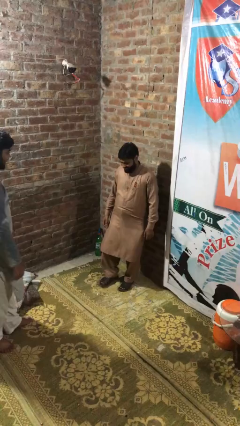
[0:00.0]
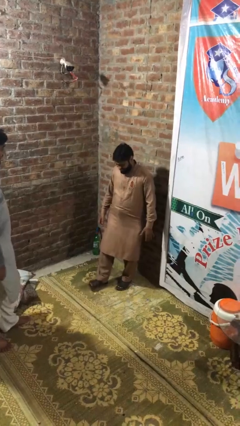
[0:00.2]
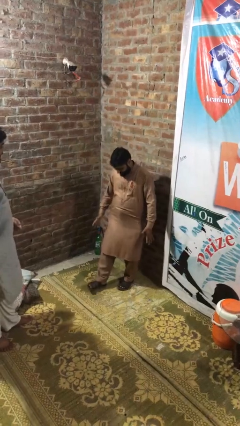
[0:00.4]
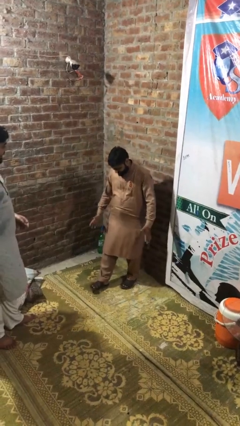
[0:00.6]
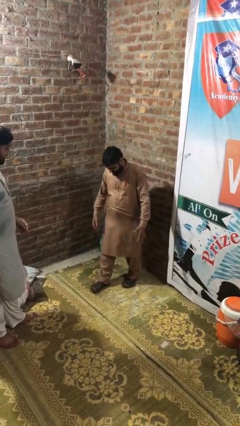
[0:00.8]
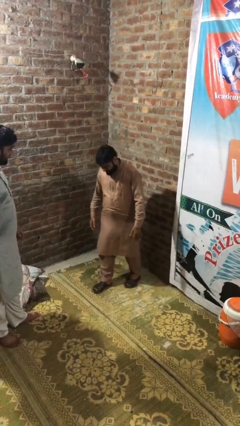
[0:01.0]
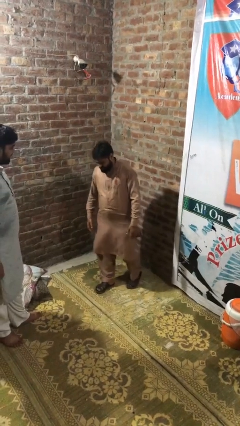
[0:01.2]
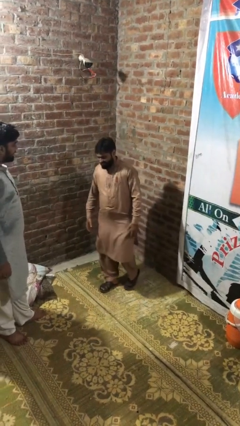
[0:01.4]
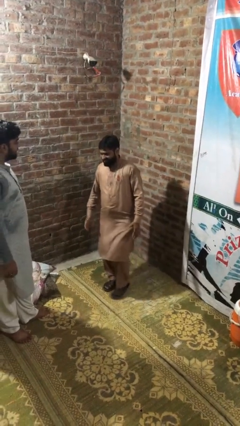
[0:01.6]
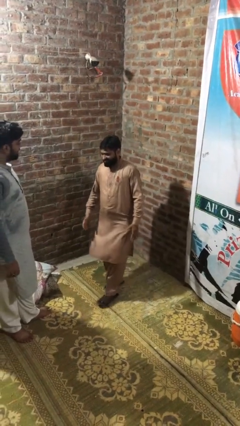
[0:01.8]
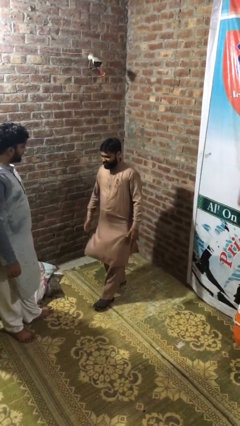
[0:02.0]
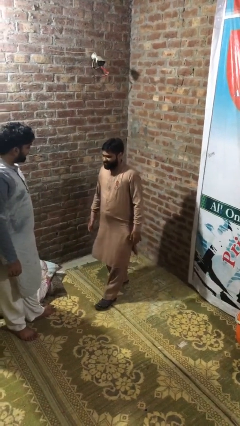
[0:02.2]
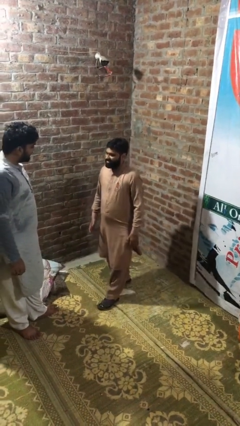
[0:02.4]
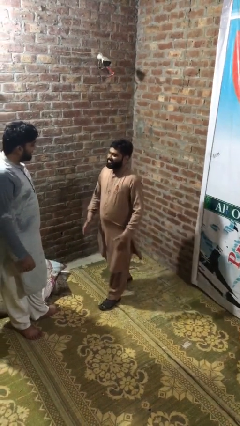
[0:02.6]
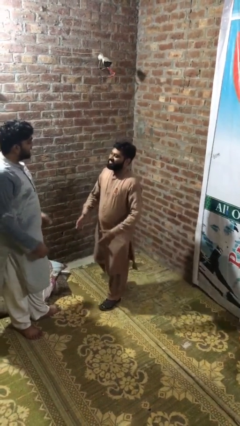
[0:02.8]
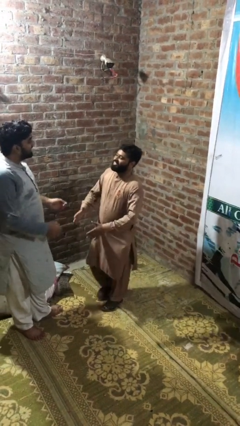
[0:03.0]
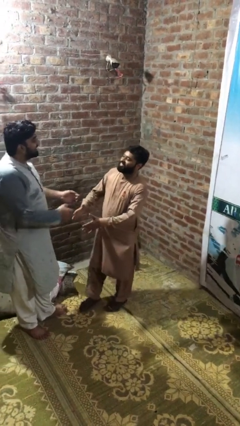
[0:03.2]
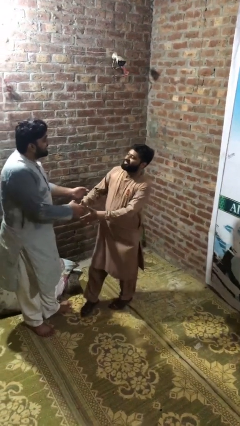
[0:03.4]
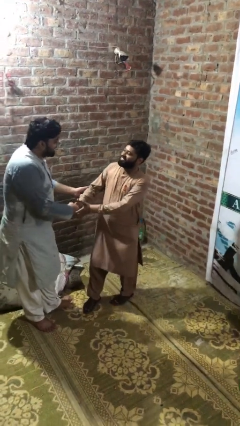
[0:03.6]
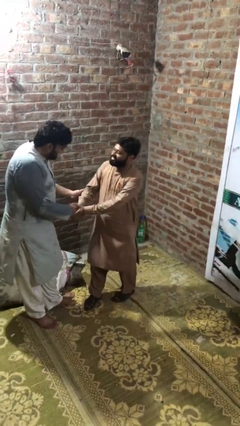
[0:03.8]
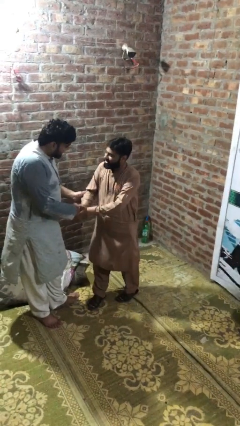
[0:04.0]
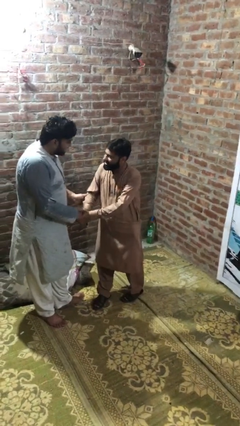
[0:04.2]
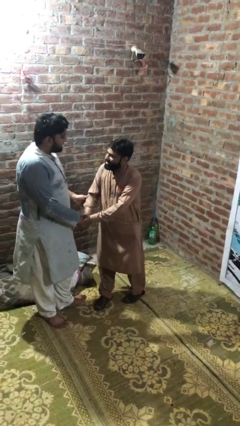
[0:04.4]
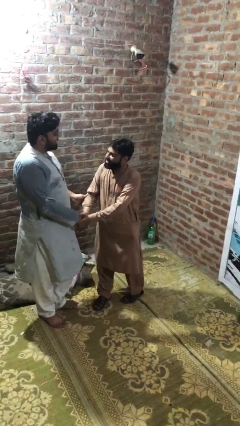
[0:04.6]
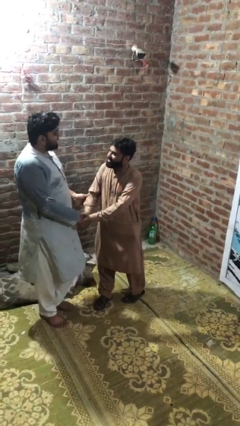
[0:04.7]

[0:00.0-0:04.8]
person shakes hand

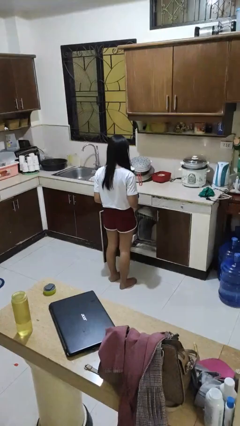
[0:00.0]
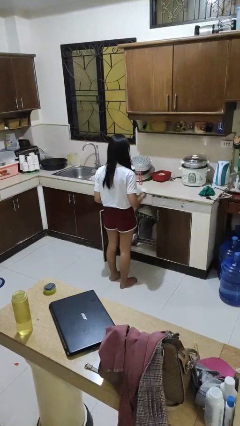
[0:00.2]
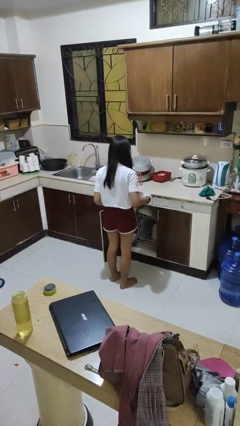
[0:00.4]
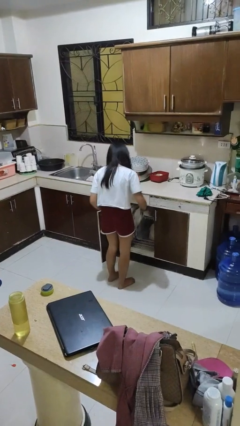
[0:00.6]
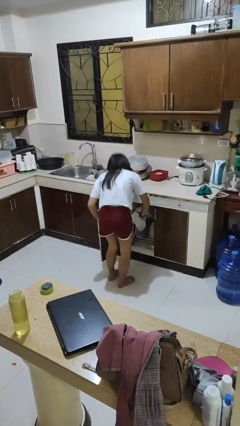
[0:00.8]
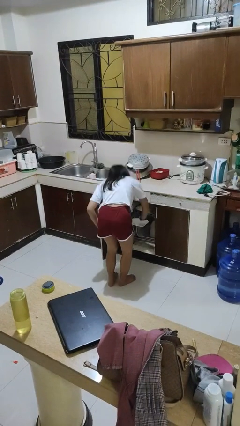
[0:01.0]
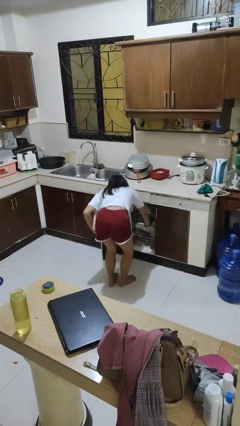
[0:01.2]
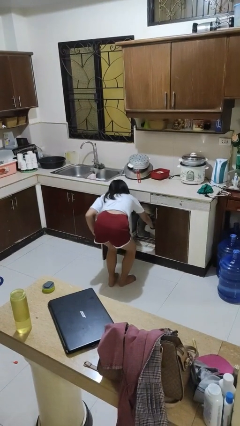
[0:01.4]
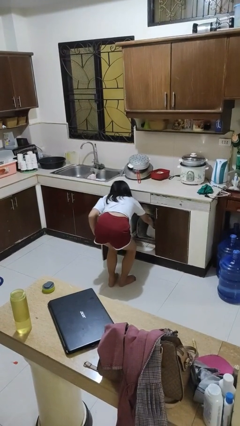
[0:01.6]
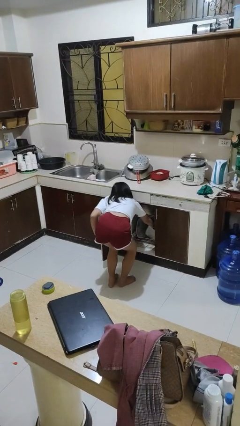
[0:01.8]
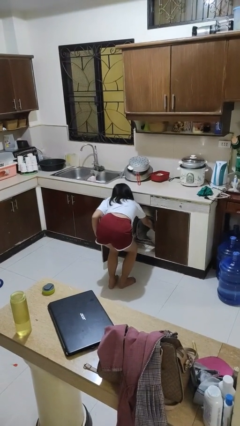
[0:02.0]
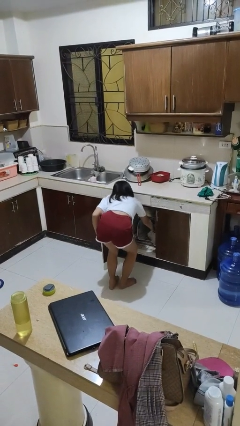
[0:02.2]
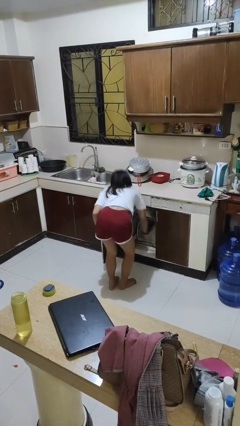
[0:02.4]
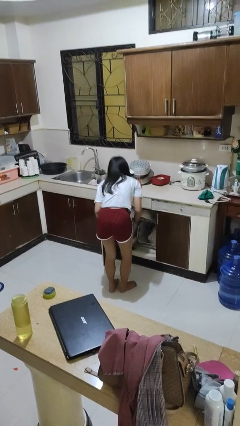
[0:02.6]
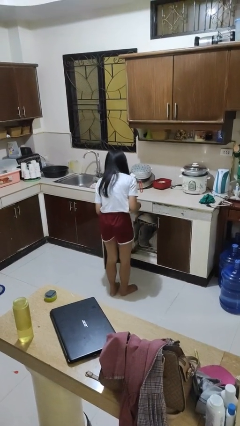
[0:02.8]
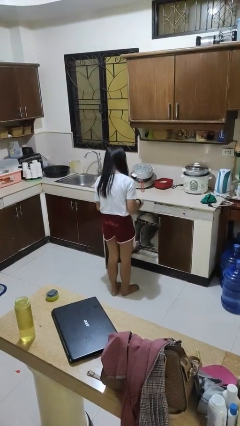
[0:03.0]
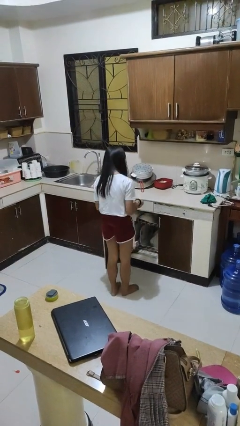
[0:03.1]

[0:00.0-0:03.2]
person loads dishwasher

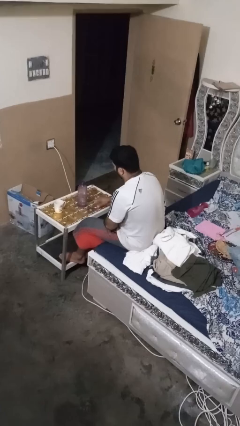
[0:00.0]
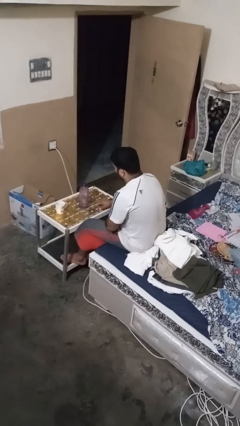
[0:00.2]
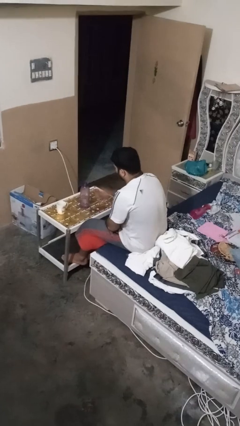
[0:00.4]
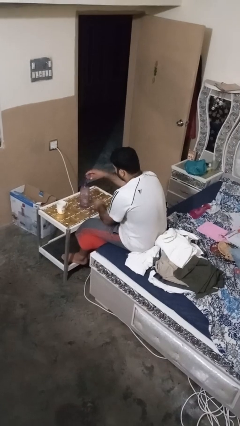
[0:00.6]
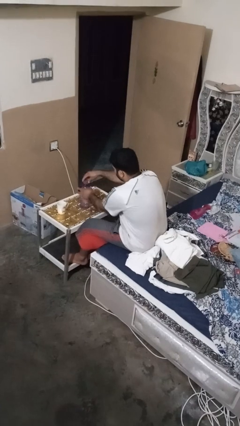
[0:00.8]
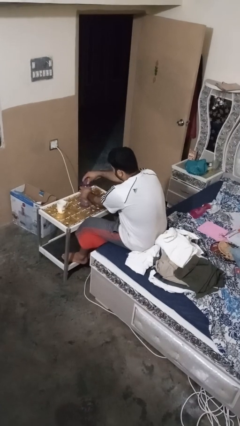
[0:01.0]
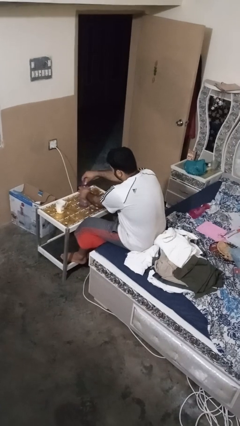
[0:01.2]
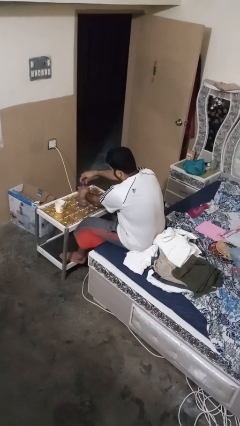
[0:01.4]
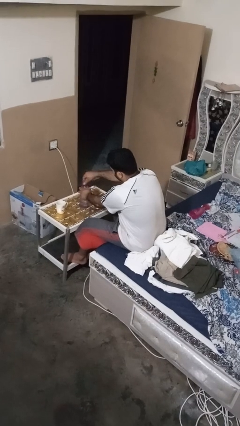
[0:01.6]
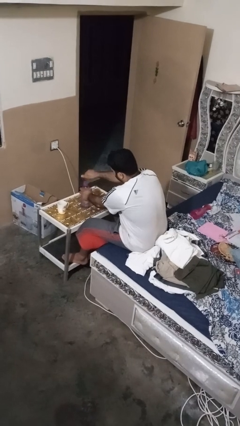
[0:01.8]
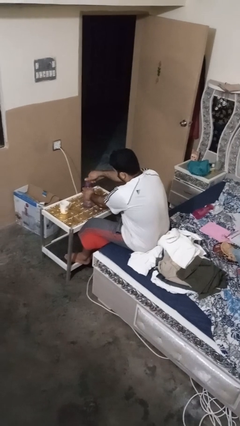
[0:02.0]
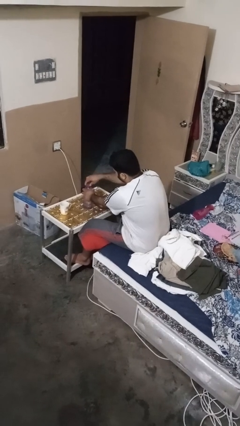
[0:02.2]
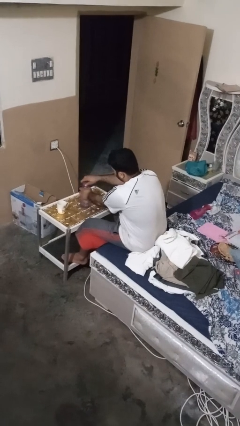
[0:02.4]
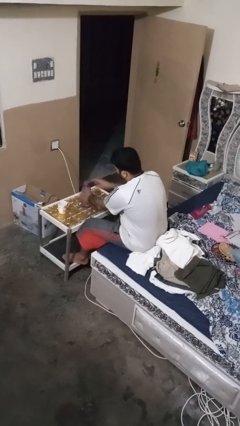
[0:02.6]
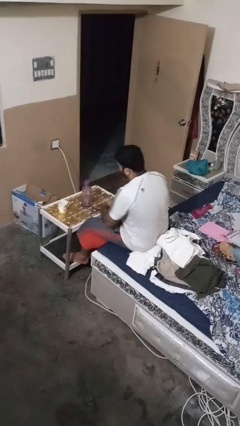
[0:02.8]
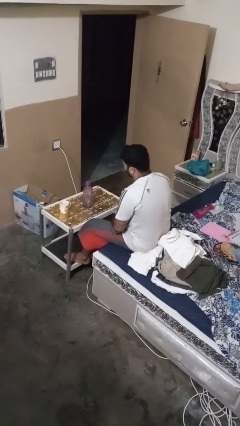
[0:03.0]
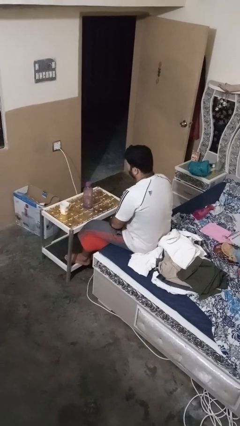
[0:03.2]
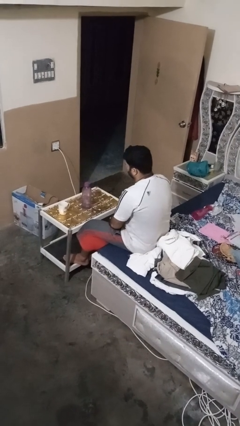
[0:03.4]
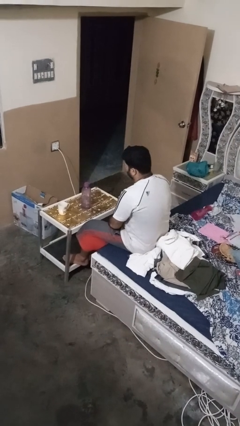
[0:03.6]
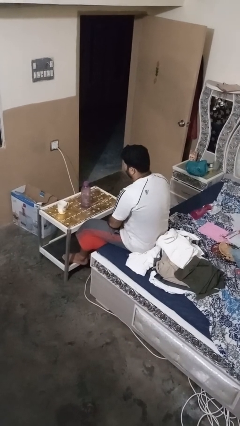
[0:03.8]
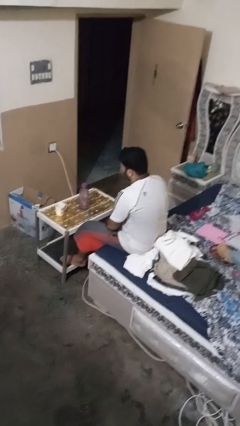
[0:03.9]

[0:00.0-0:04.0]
person screws lid to bottle

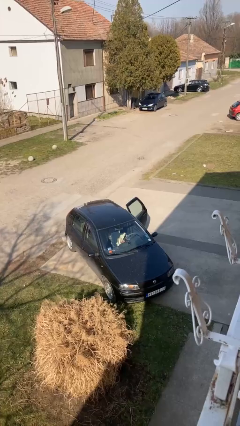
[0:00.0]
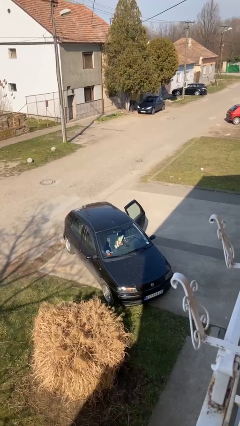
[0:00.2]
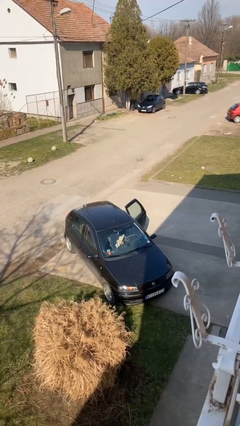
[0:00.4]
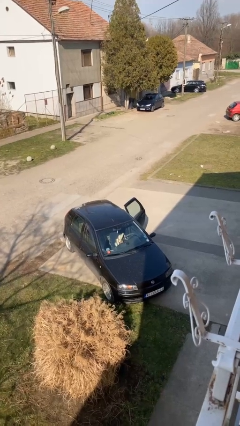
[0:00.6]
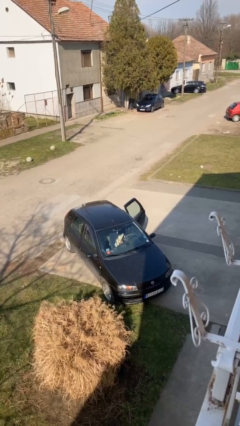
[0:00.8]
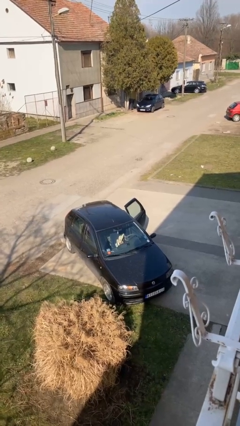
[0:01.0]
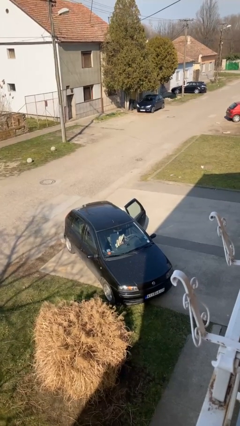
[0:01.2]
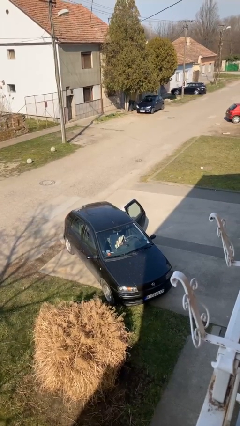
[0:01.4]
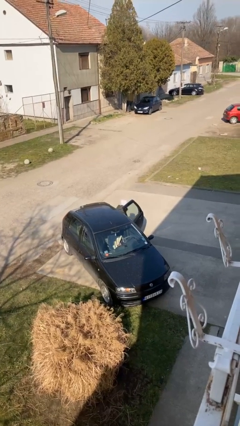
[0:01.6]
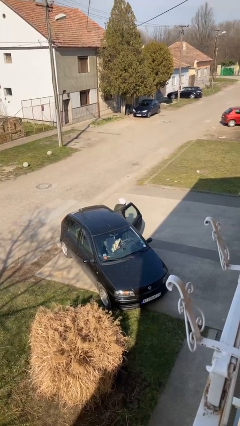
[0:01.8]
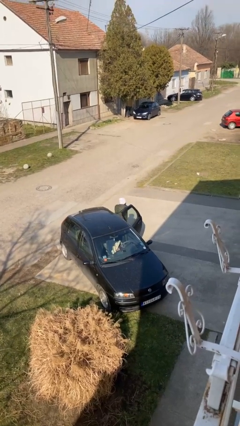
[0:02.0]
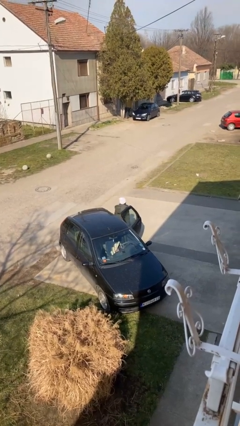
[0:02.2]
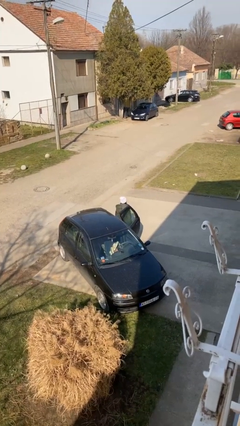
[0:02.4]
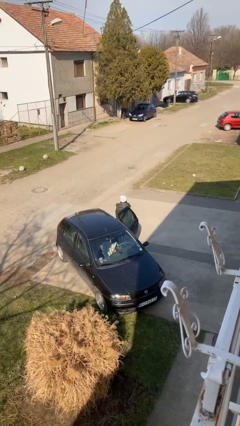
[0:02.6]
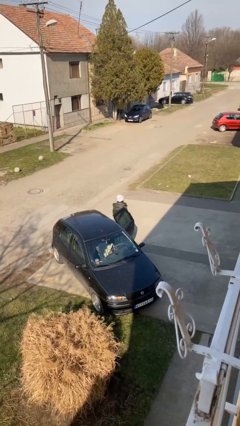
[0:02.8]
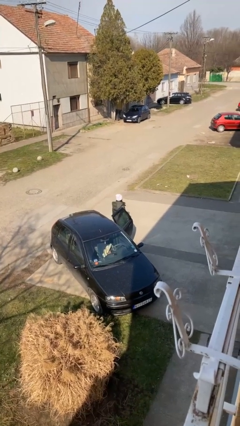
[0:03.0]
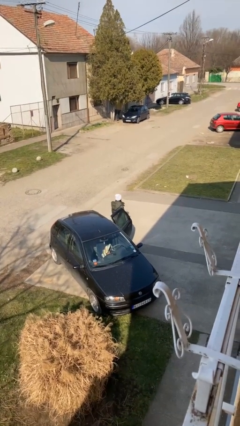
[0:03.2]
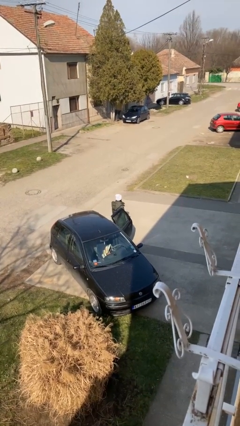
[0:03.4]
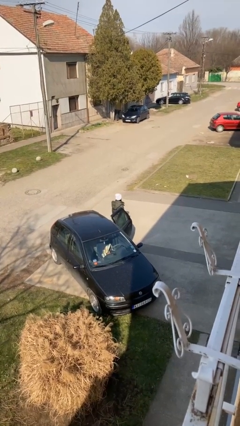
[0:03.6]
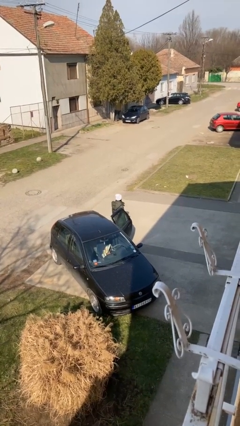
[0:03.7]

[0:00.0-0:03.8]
person exits car

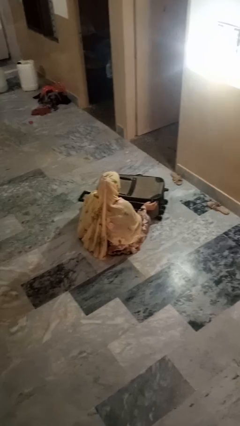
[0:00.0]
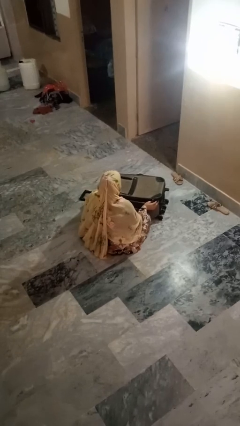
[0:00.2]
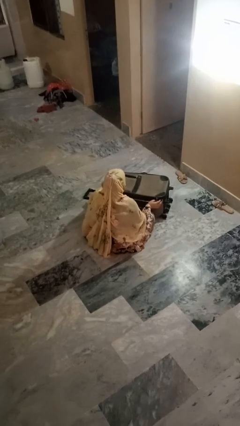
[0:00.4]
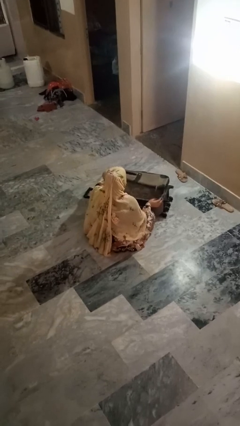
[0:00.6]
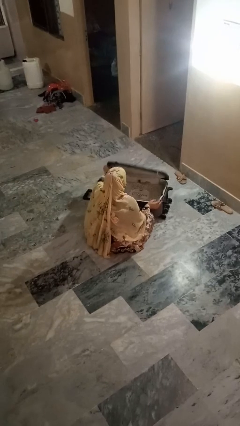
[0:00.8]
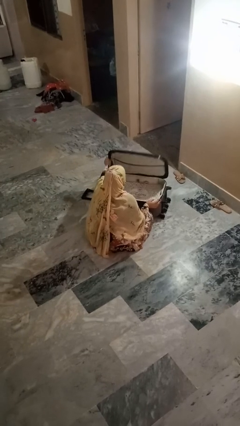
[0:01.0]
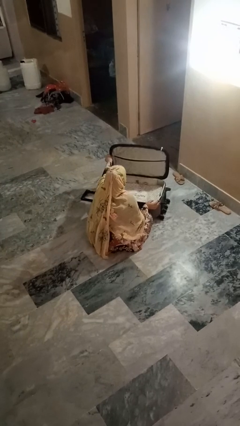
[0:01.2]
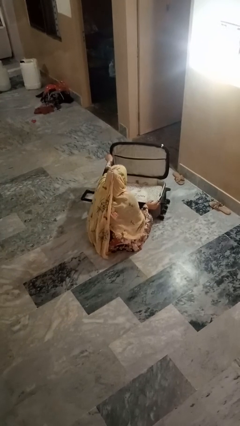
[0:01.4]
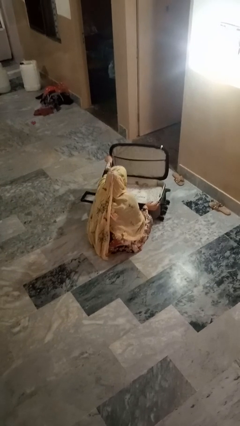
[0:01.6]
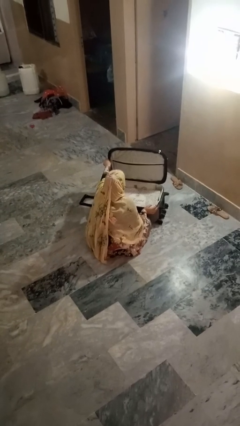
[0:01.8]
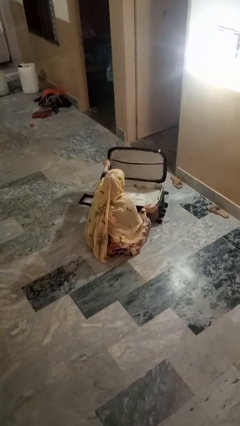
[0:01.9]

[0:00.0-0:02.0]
person opens suitcase
